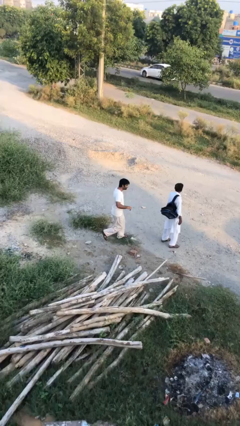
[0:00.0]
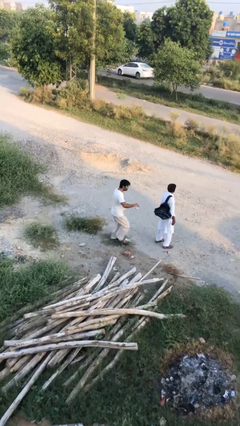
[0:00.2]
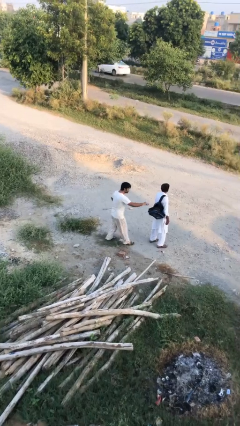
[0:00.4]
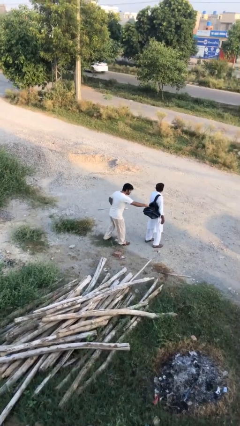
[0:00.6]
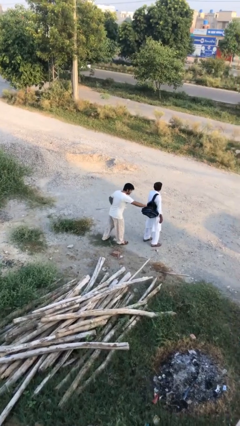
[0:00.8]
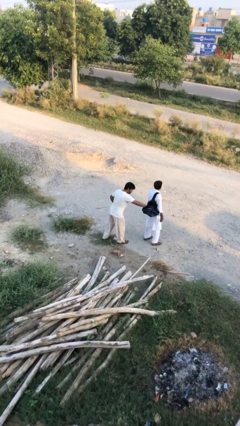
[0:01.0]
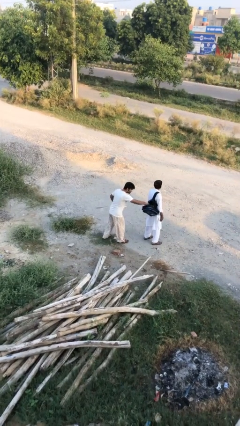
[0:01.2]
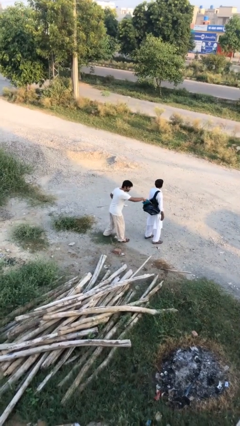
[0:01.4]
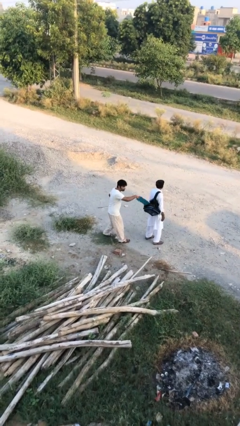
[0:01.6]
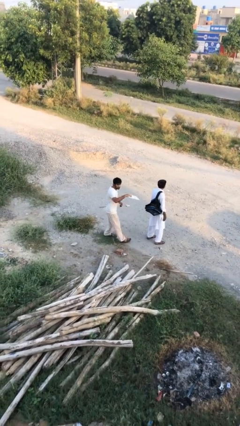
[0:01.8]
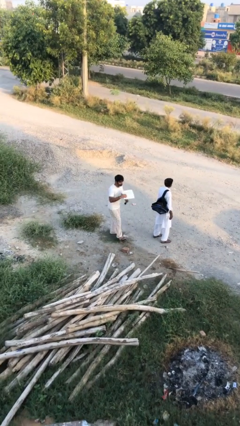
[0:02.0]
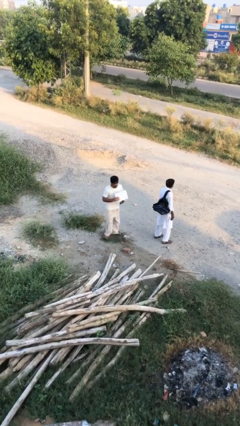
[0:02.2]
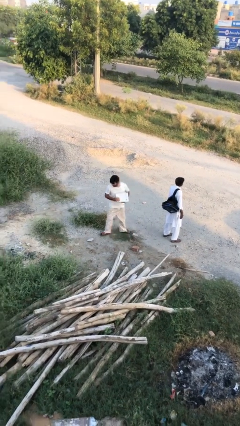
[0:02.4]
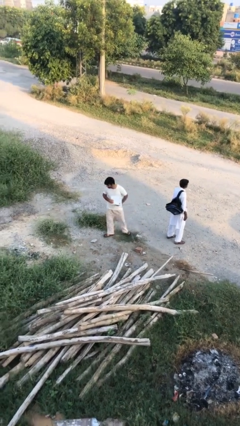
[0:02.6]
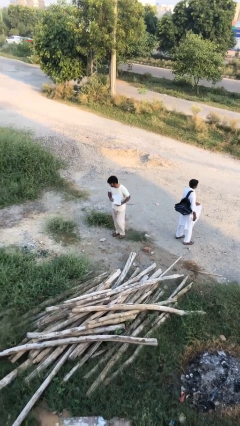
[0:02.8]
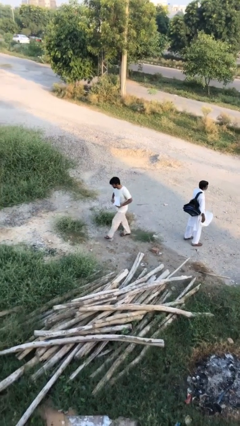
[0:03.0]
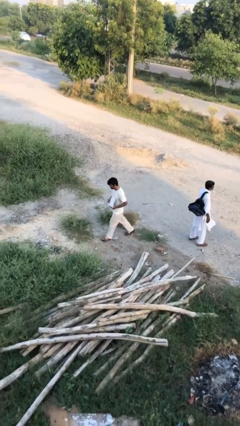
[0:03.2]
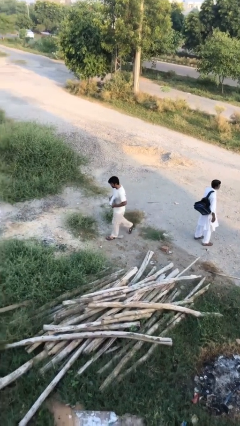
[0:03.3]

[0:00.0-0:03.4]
person steals object from person

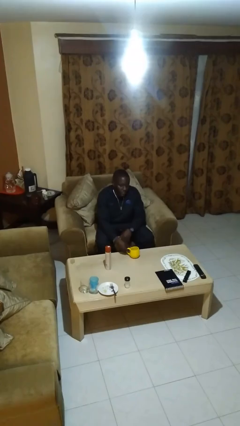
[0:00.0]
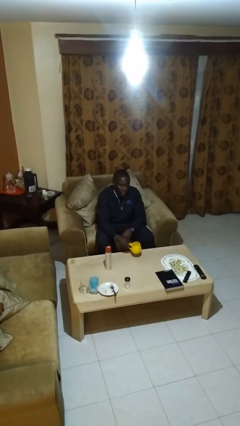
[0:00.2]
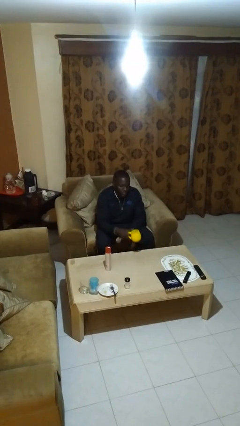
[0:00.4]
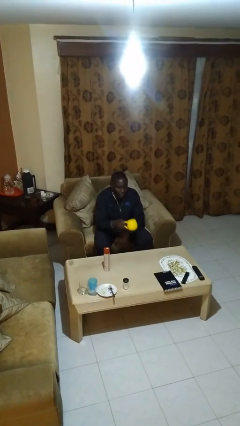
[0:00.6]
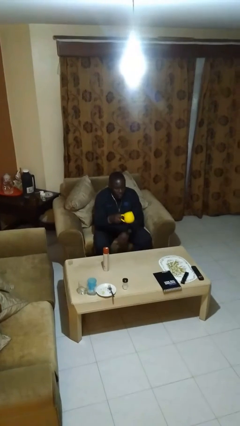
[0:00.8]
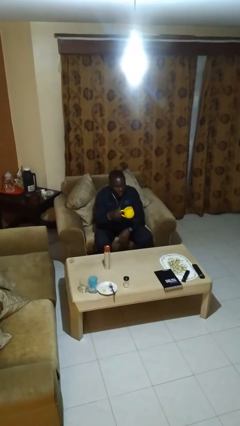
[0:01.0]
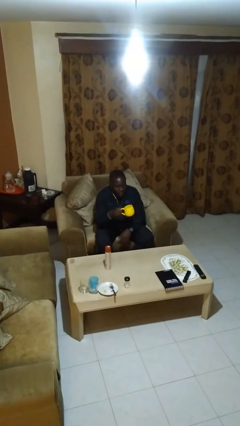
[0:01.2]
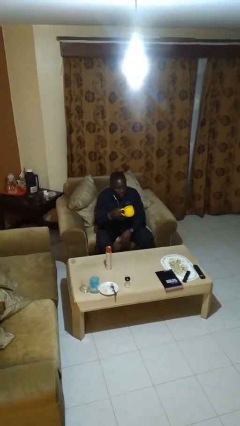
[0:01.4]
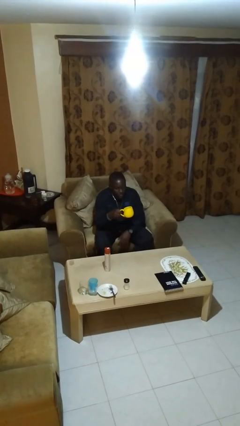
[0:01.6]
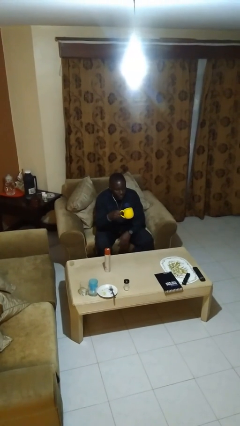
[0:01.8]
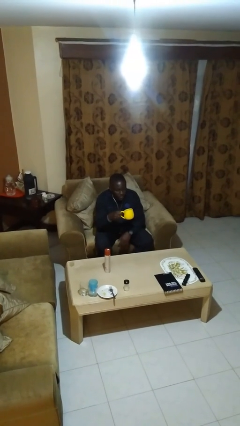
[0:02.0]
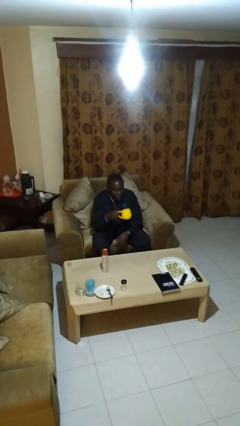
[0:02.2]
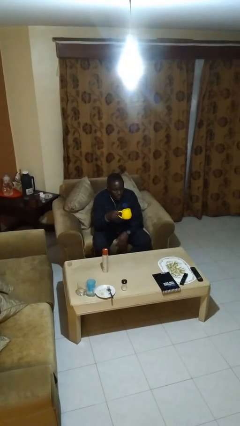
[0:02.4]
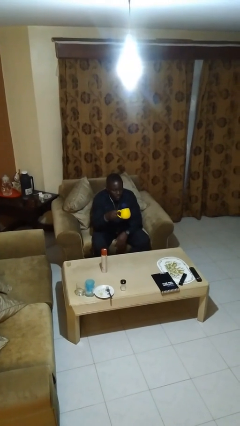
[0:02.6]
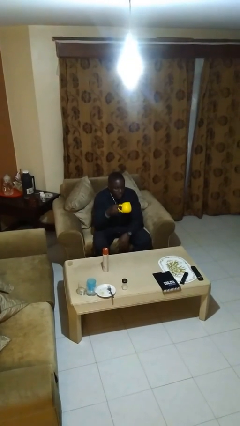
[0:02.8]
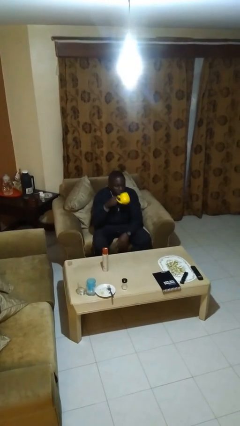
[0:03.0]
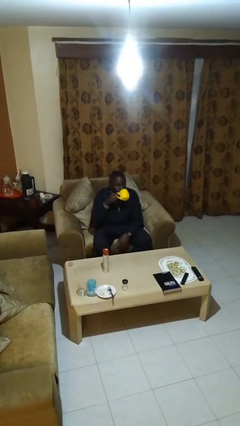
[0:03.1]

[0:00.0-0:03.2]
person picks up object from table

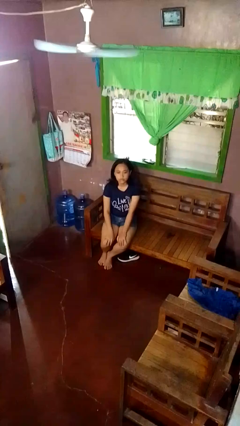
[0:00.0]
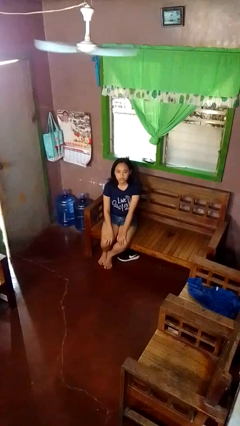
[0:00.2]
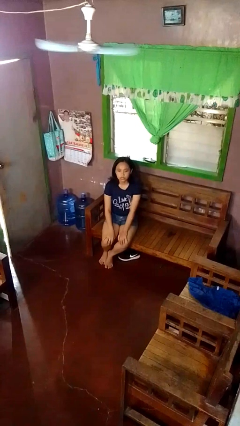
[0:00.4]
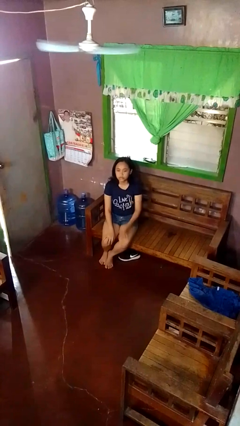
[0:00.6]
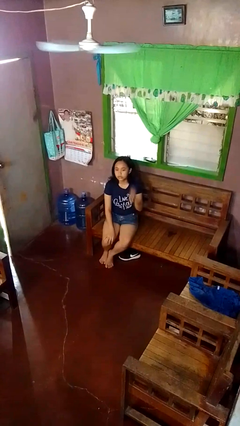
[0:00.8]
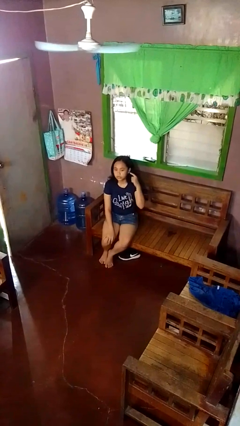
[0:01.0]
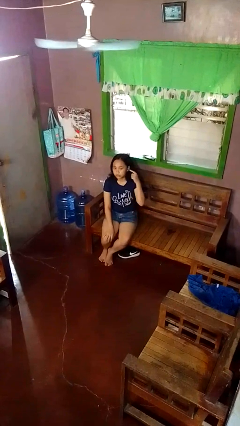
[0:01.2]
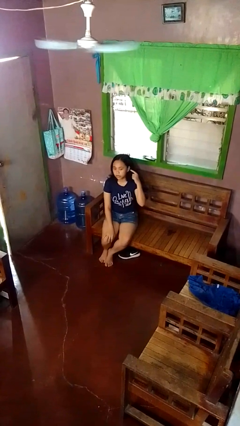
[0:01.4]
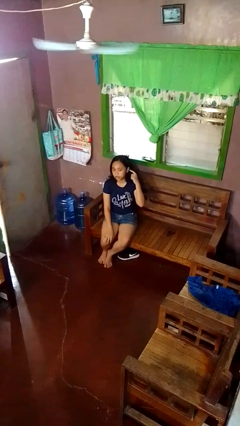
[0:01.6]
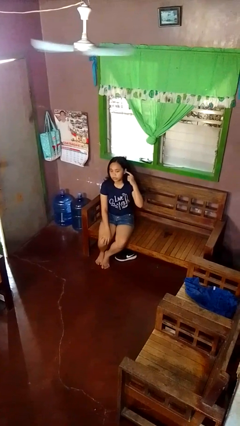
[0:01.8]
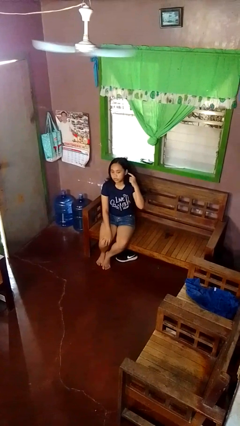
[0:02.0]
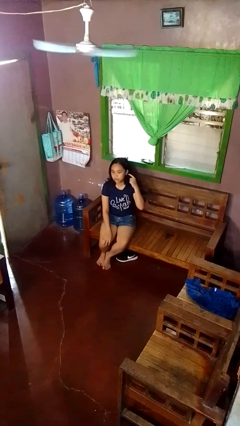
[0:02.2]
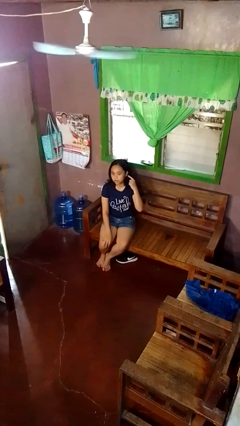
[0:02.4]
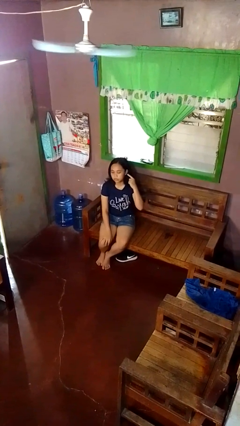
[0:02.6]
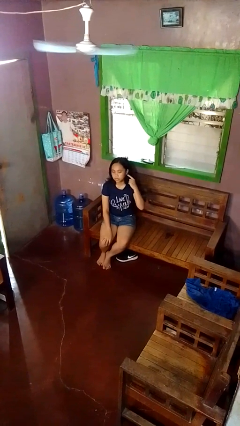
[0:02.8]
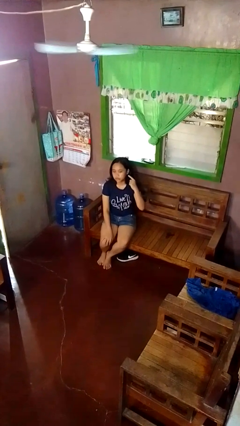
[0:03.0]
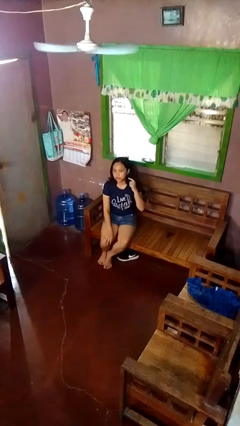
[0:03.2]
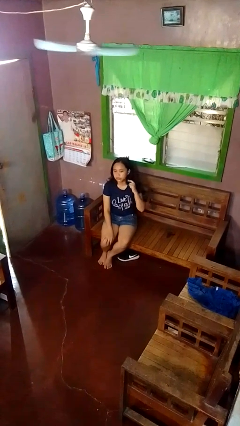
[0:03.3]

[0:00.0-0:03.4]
person gestures listen closely

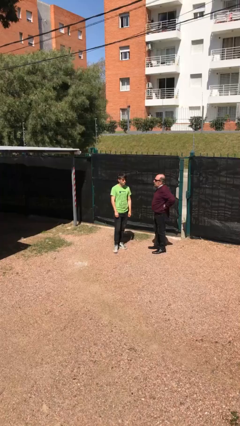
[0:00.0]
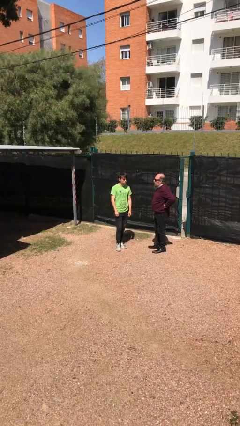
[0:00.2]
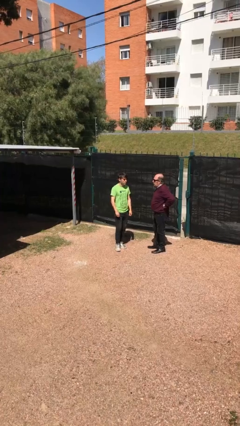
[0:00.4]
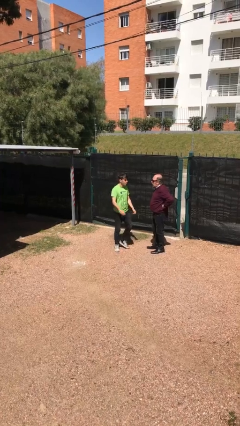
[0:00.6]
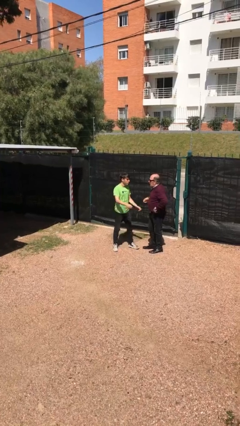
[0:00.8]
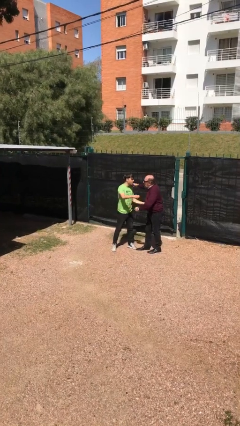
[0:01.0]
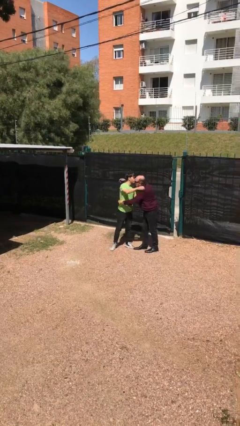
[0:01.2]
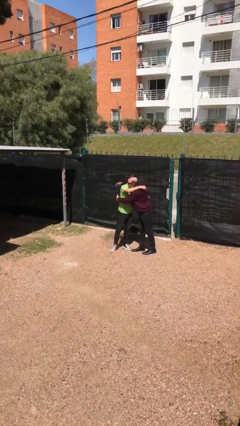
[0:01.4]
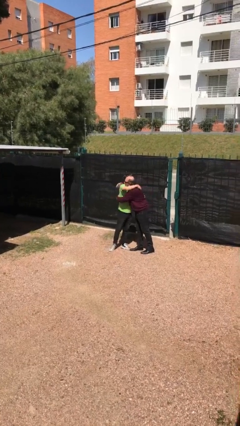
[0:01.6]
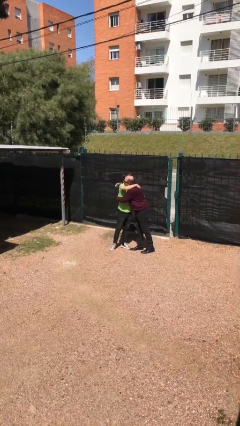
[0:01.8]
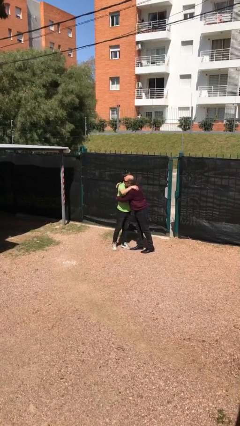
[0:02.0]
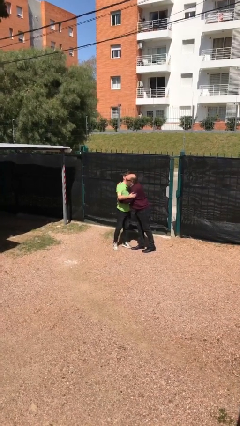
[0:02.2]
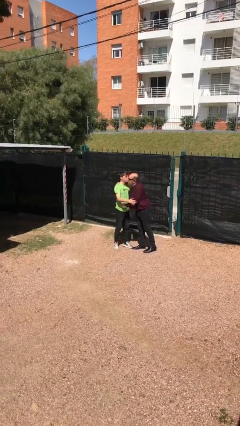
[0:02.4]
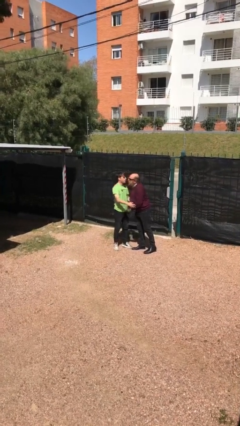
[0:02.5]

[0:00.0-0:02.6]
person embraces person

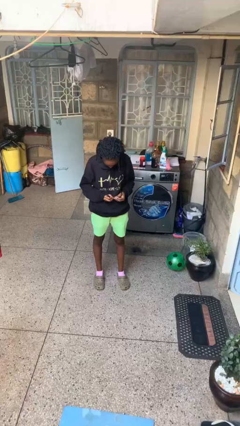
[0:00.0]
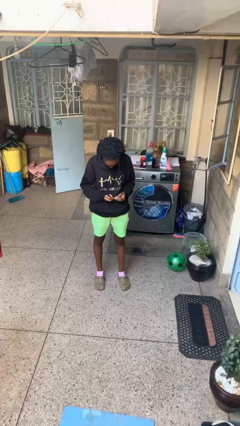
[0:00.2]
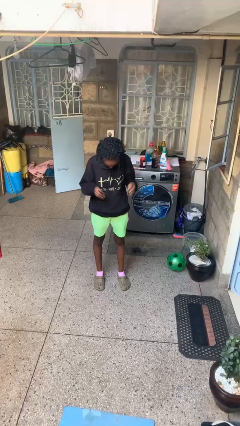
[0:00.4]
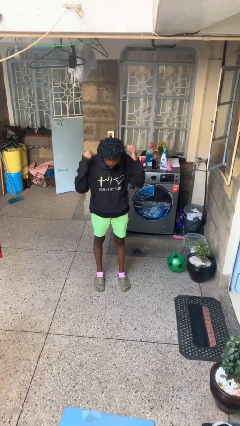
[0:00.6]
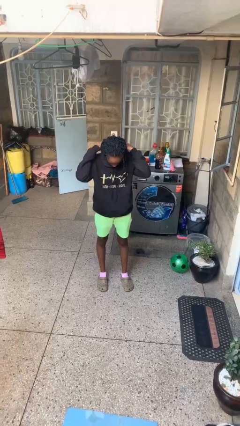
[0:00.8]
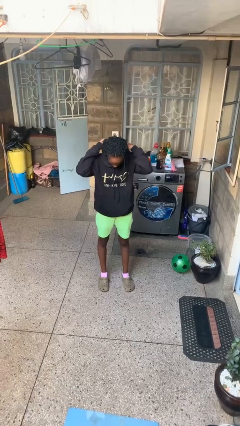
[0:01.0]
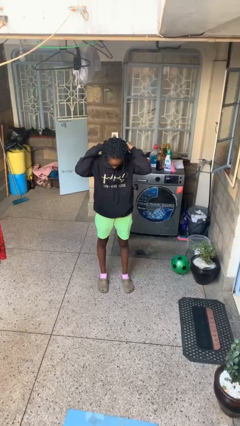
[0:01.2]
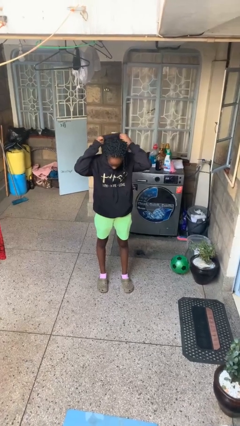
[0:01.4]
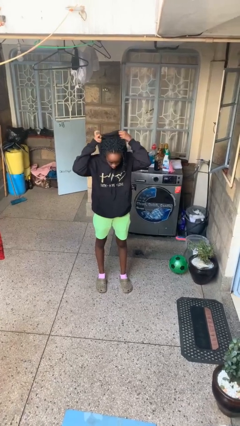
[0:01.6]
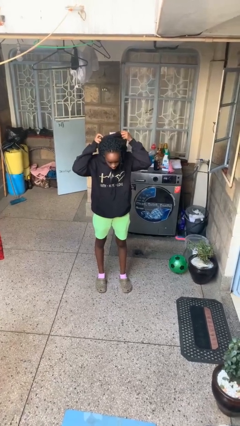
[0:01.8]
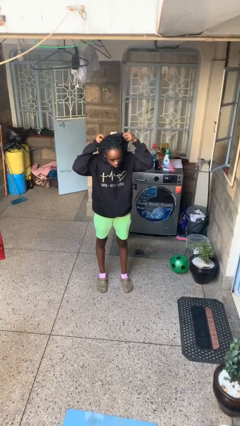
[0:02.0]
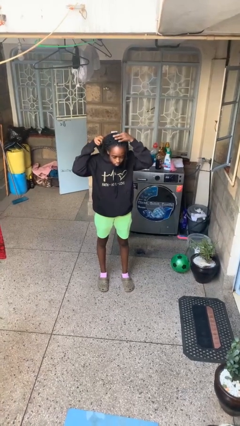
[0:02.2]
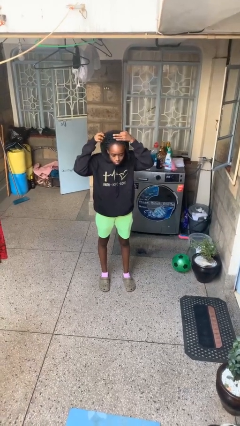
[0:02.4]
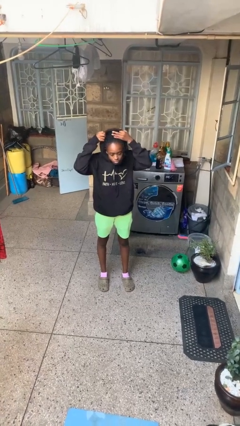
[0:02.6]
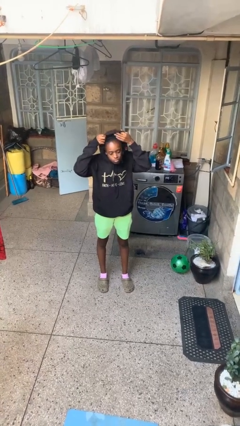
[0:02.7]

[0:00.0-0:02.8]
person puts on hoodie

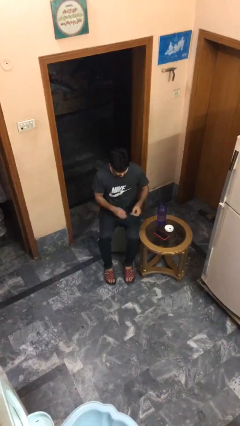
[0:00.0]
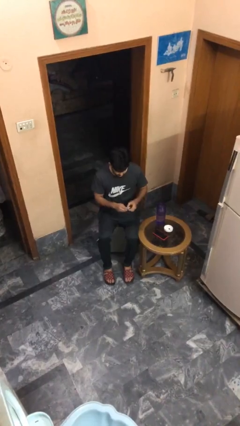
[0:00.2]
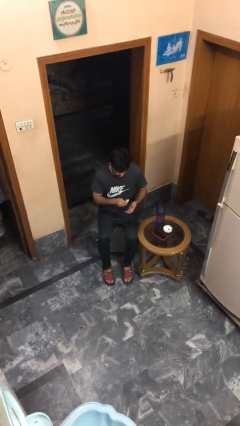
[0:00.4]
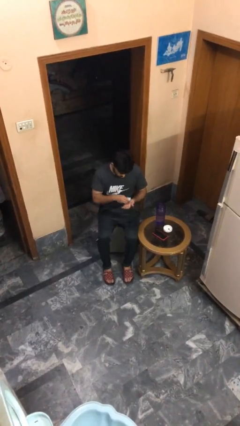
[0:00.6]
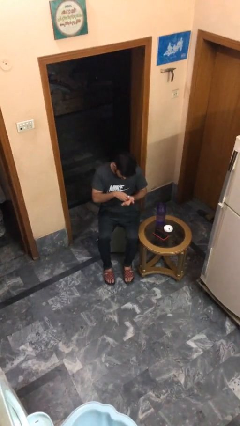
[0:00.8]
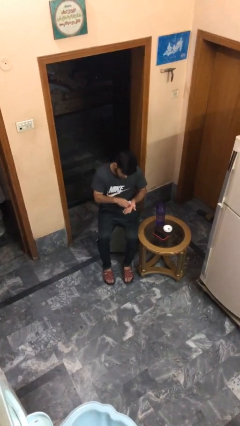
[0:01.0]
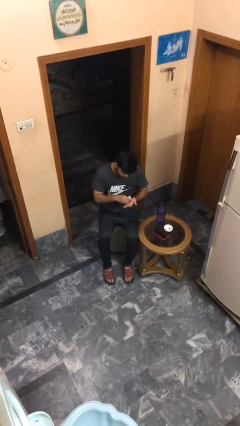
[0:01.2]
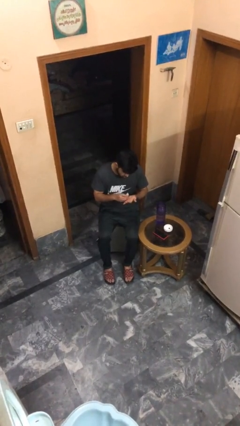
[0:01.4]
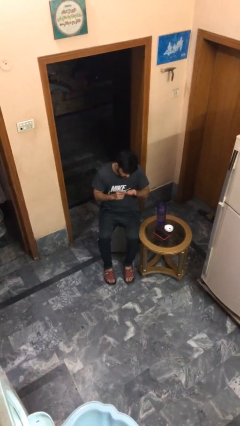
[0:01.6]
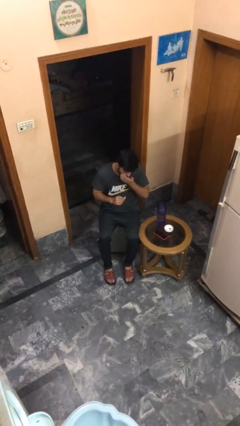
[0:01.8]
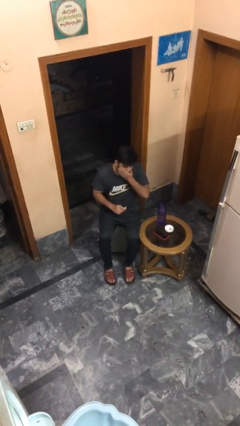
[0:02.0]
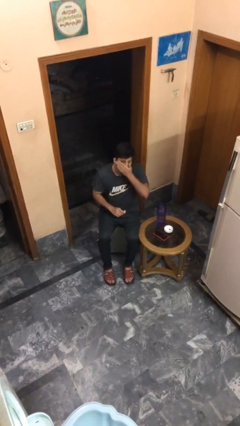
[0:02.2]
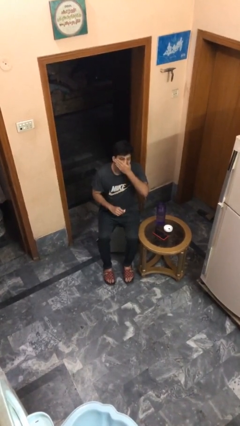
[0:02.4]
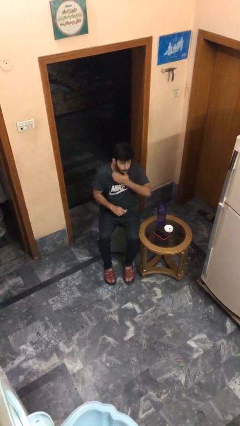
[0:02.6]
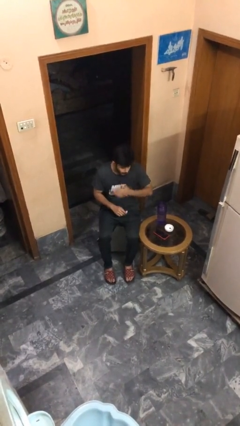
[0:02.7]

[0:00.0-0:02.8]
person takes medicine pills
